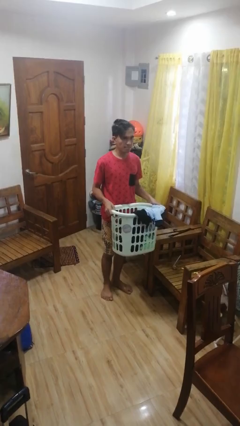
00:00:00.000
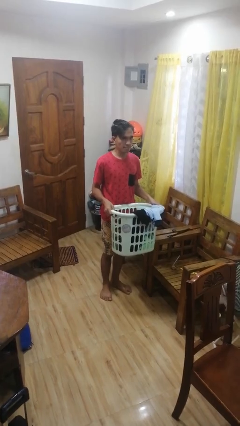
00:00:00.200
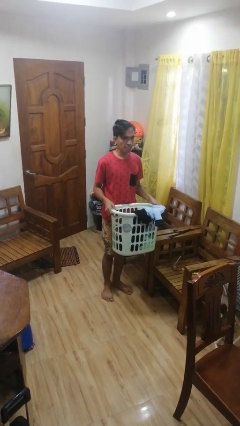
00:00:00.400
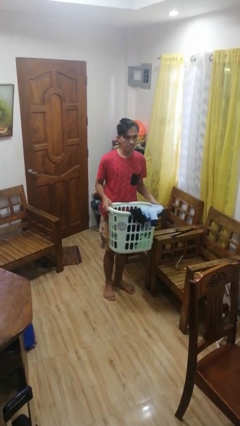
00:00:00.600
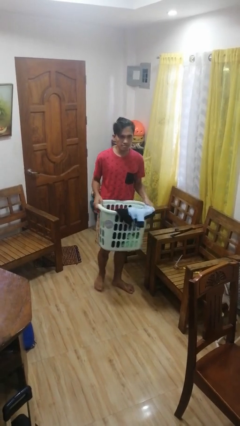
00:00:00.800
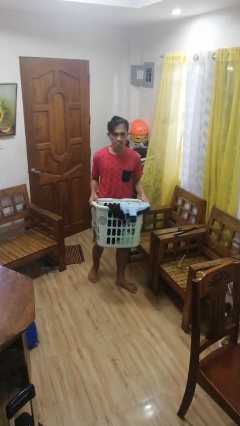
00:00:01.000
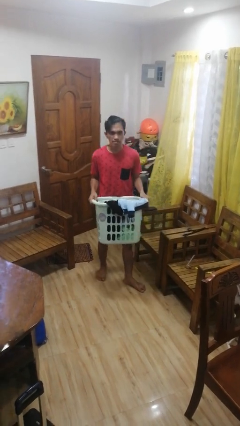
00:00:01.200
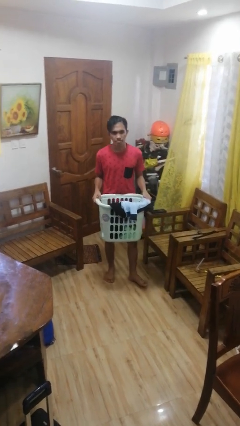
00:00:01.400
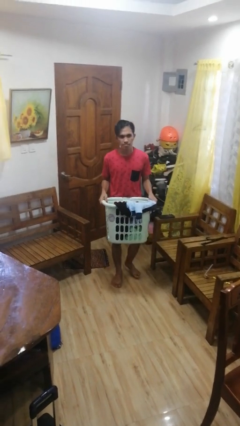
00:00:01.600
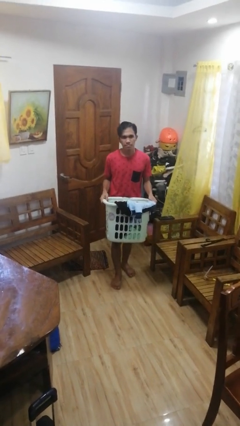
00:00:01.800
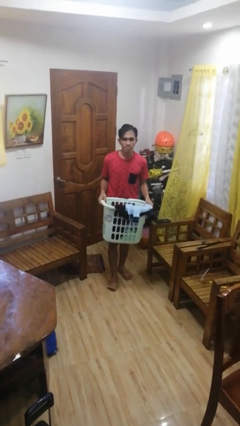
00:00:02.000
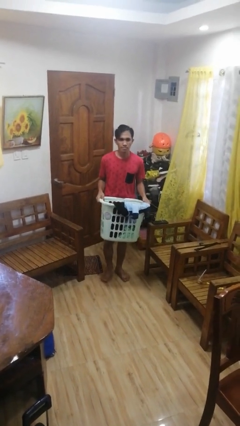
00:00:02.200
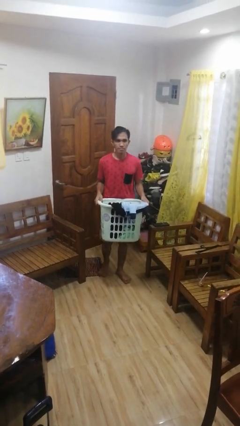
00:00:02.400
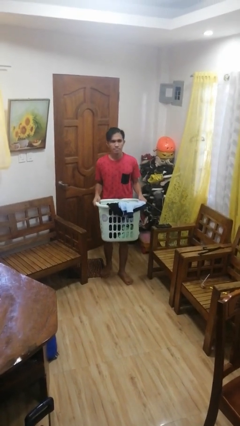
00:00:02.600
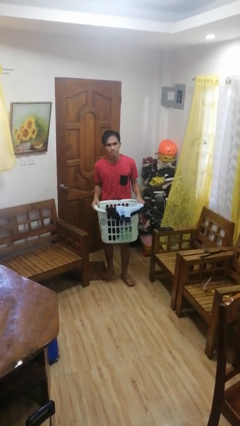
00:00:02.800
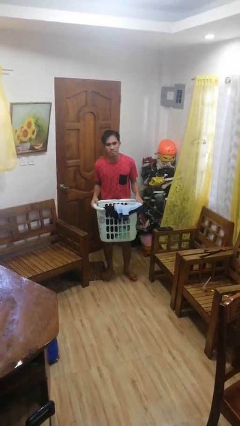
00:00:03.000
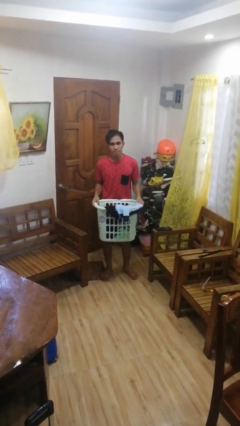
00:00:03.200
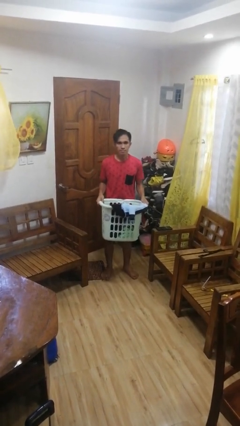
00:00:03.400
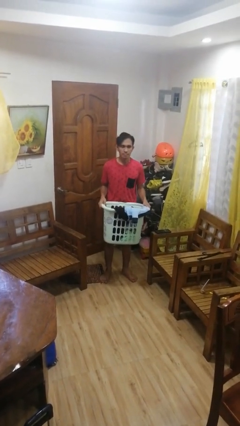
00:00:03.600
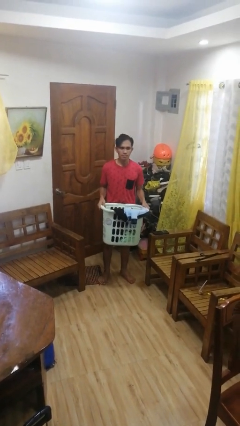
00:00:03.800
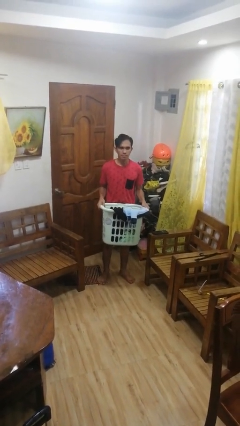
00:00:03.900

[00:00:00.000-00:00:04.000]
person carries laundry basket

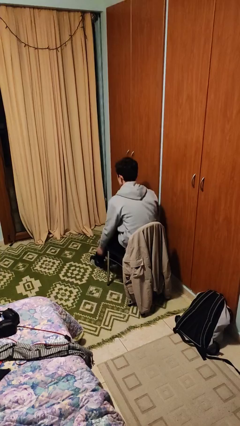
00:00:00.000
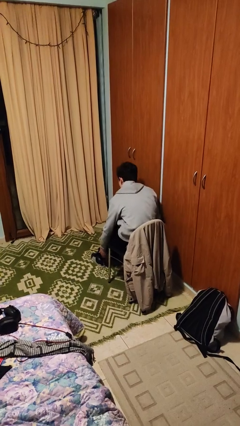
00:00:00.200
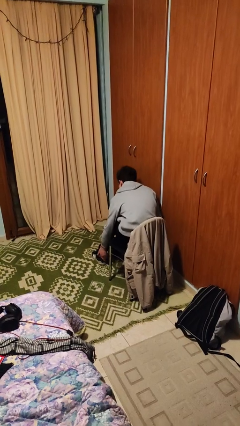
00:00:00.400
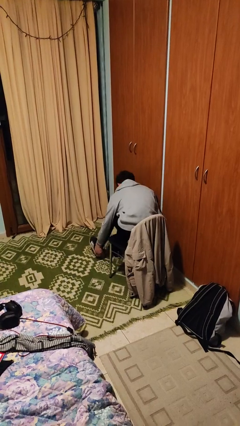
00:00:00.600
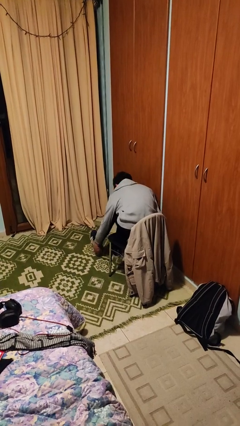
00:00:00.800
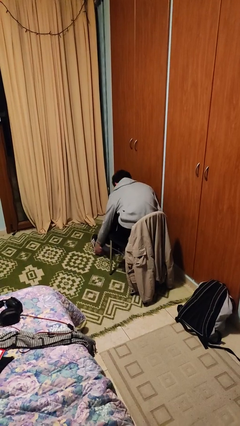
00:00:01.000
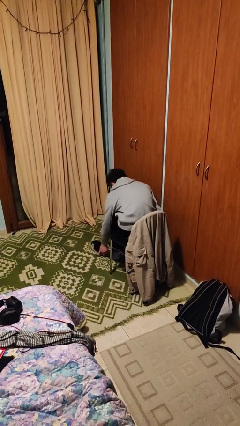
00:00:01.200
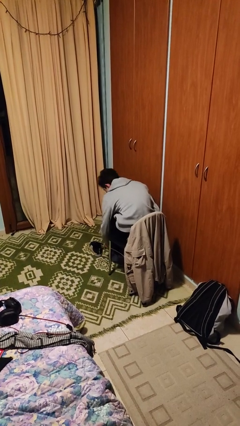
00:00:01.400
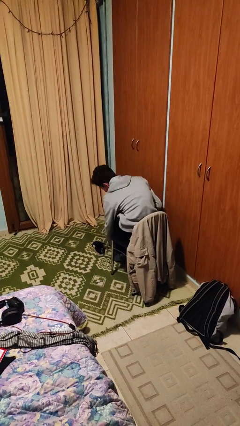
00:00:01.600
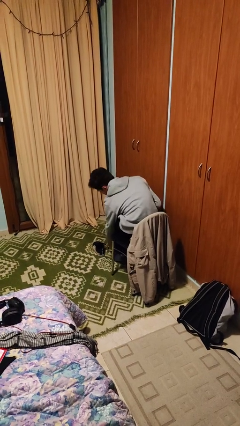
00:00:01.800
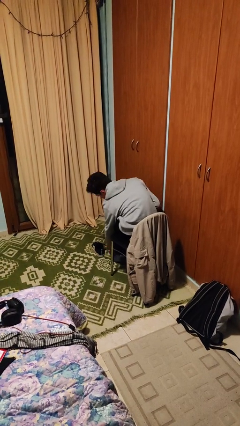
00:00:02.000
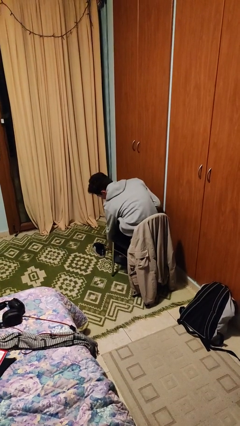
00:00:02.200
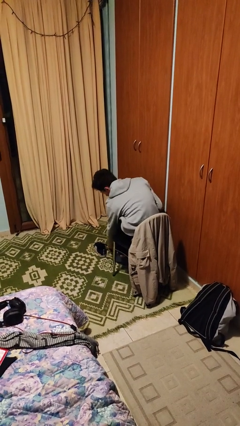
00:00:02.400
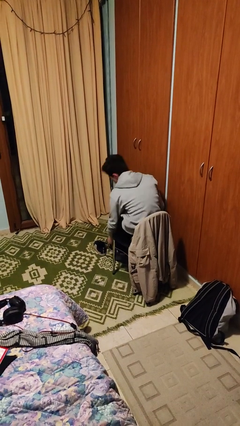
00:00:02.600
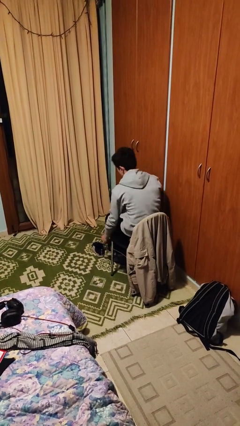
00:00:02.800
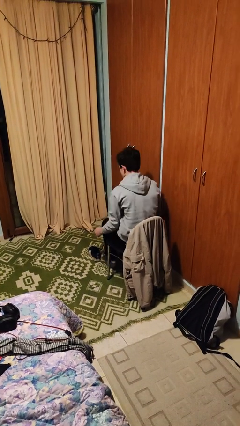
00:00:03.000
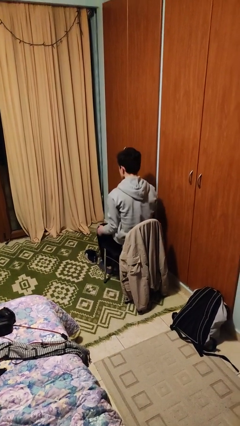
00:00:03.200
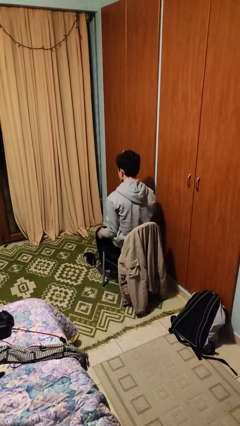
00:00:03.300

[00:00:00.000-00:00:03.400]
person takes off shoes

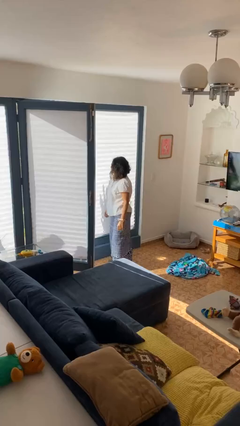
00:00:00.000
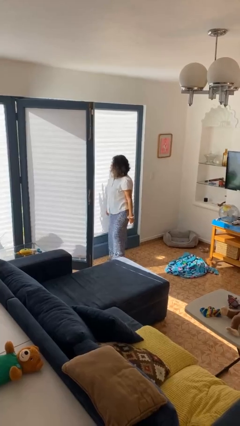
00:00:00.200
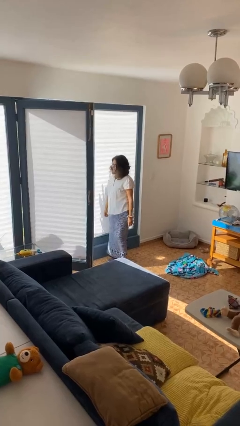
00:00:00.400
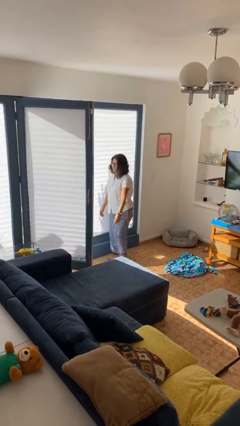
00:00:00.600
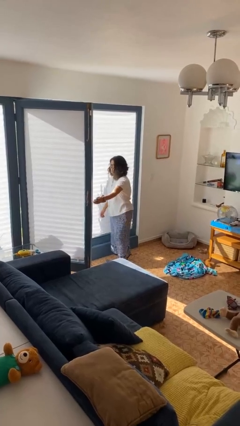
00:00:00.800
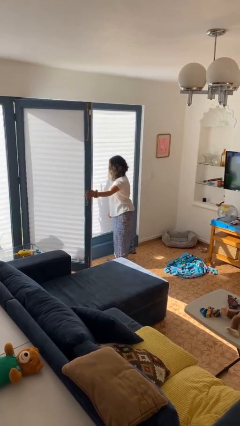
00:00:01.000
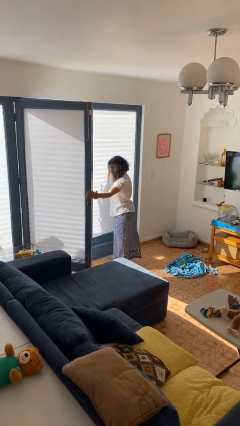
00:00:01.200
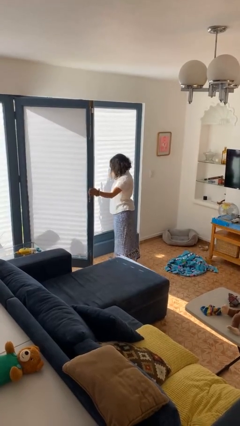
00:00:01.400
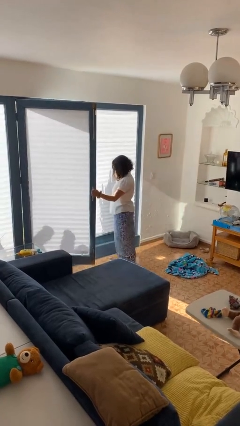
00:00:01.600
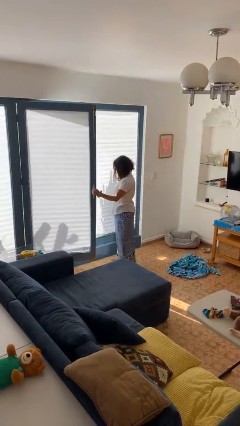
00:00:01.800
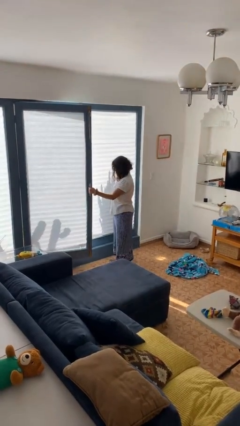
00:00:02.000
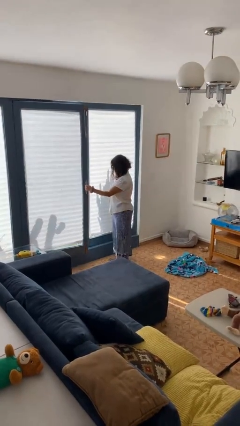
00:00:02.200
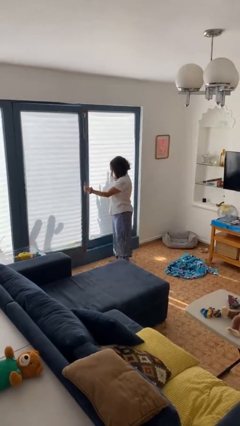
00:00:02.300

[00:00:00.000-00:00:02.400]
person closes home window

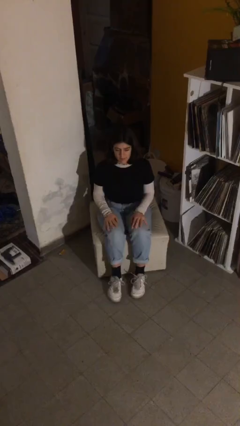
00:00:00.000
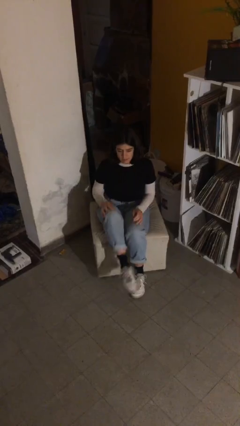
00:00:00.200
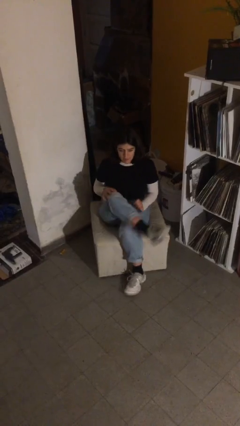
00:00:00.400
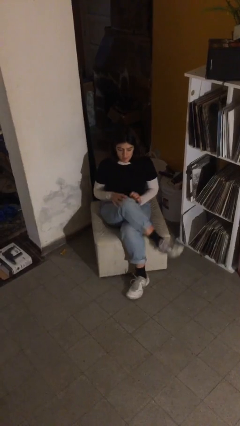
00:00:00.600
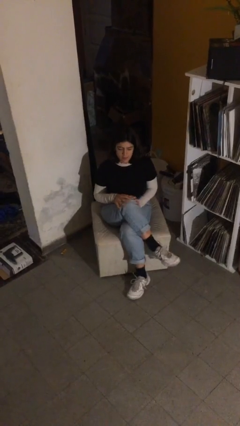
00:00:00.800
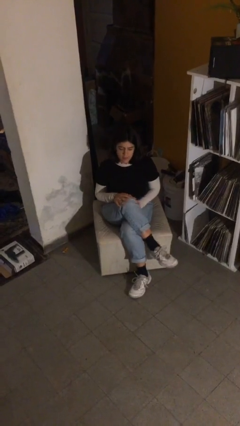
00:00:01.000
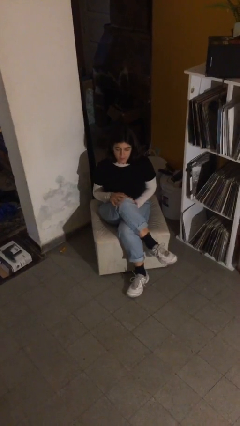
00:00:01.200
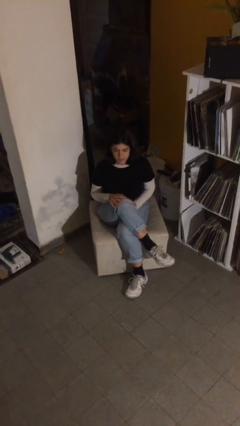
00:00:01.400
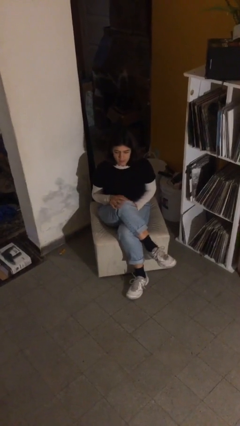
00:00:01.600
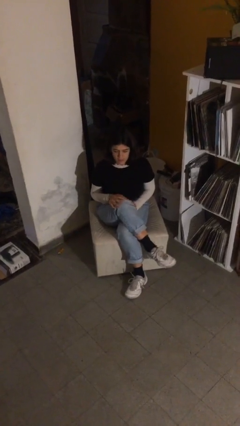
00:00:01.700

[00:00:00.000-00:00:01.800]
person crosses legs

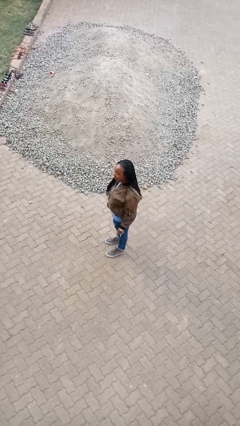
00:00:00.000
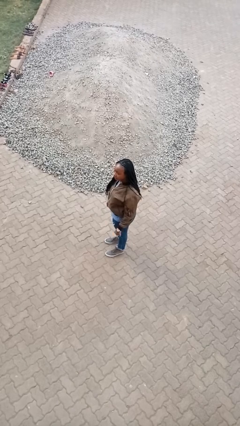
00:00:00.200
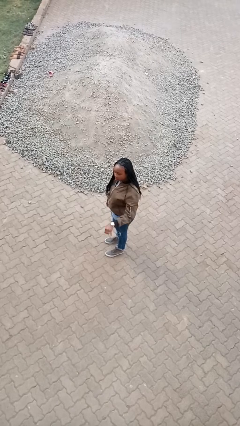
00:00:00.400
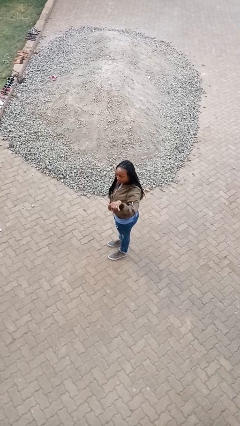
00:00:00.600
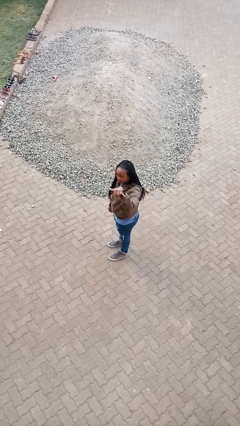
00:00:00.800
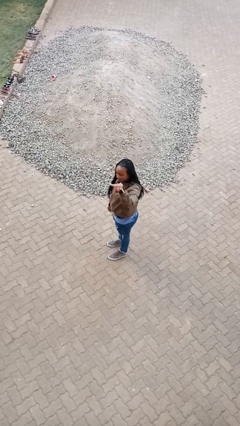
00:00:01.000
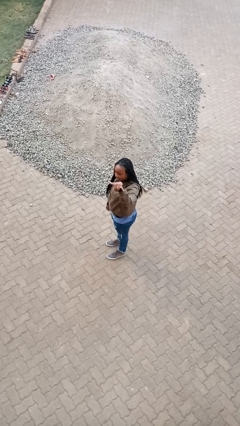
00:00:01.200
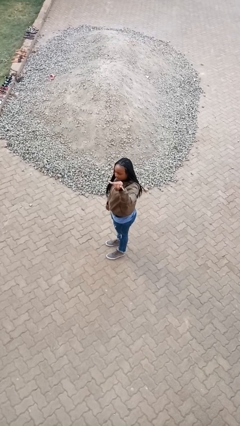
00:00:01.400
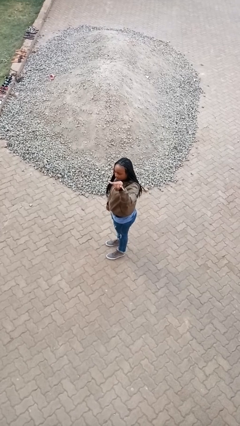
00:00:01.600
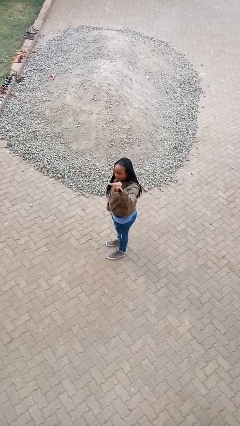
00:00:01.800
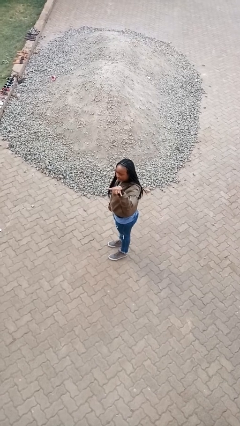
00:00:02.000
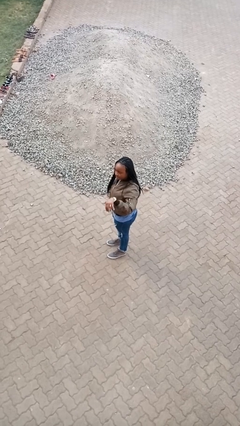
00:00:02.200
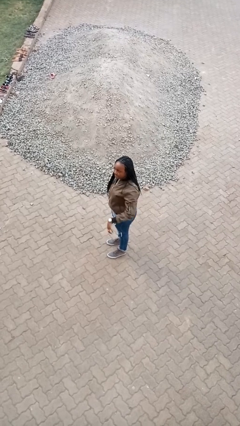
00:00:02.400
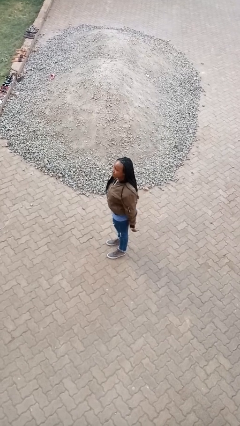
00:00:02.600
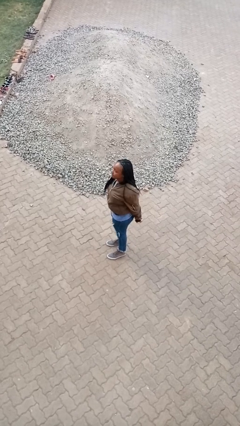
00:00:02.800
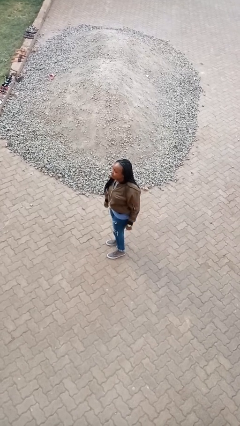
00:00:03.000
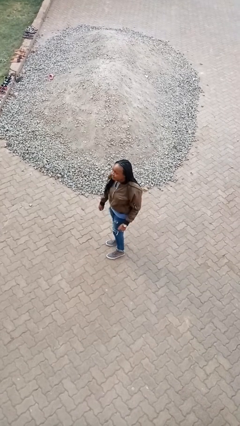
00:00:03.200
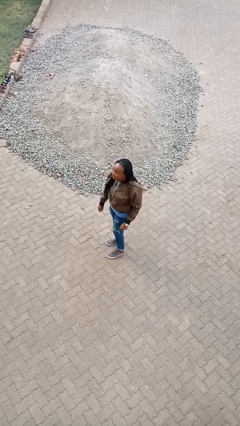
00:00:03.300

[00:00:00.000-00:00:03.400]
person gestures hang loose

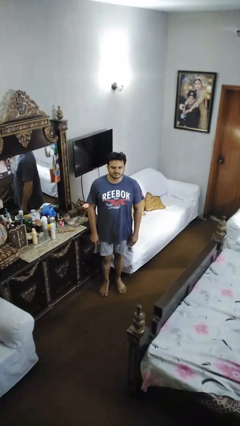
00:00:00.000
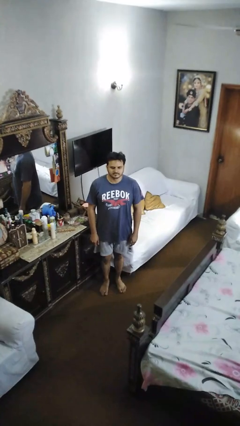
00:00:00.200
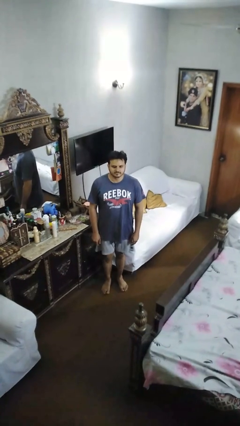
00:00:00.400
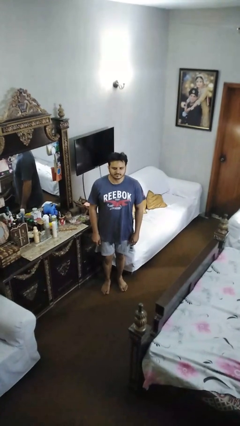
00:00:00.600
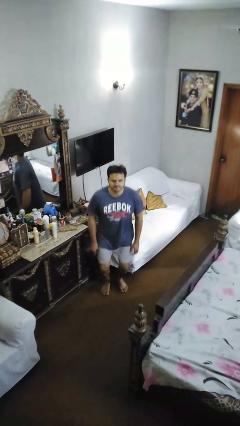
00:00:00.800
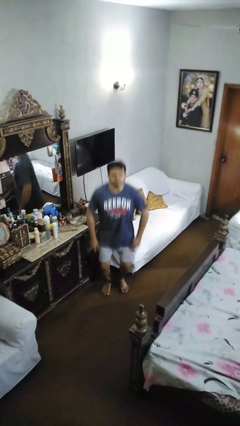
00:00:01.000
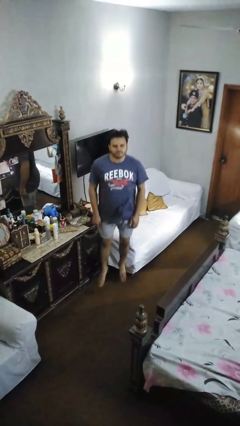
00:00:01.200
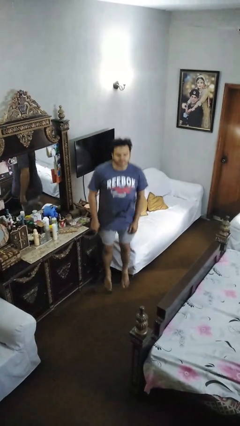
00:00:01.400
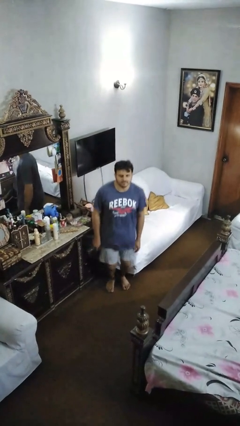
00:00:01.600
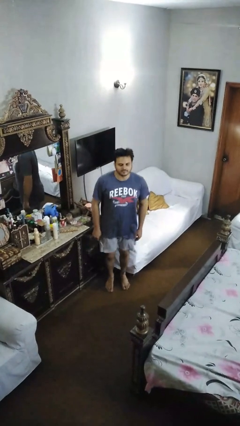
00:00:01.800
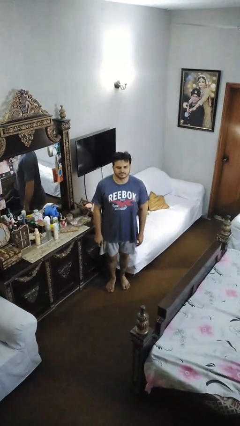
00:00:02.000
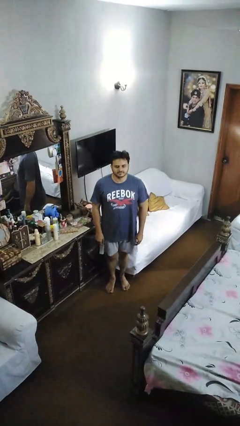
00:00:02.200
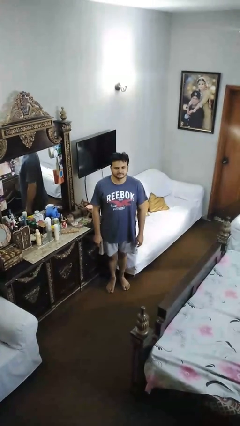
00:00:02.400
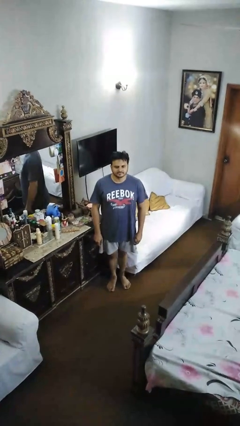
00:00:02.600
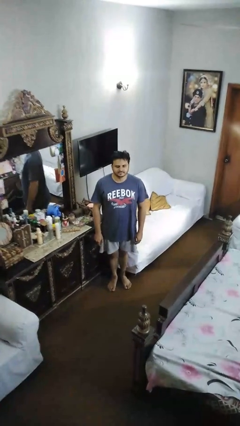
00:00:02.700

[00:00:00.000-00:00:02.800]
person jumps
